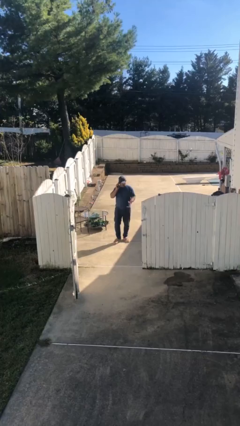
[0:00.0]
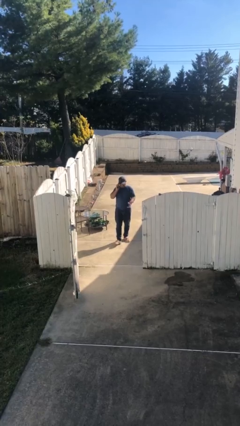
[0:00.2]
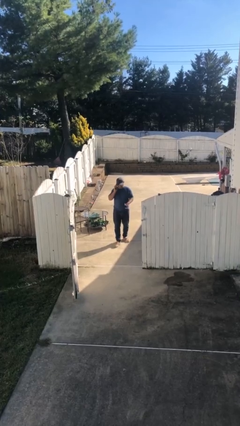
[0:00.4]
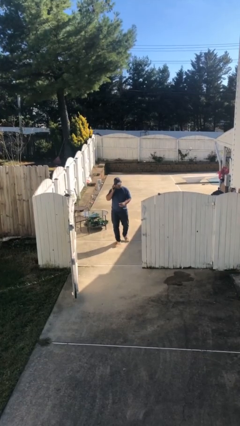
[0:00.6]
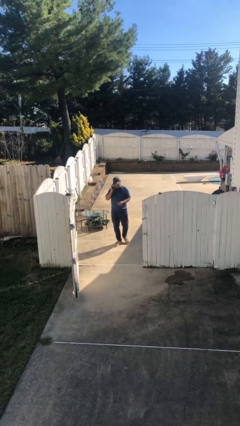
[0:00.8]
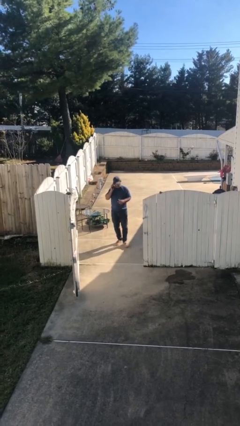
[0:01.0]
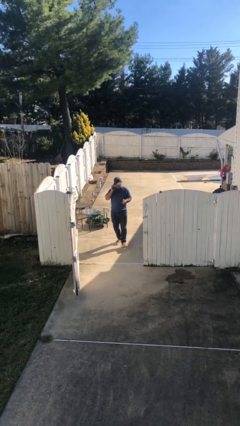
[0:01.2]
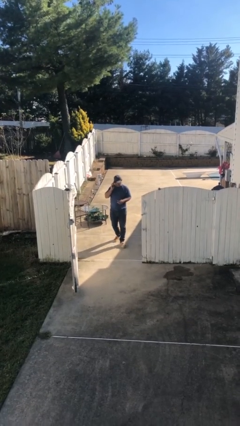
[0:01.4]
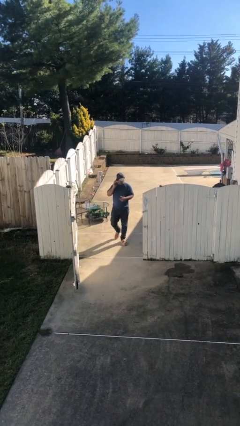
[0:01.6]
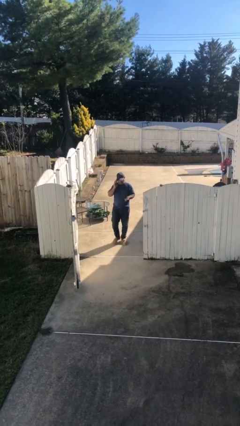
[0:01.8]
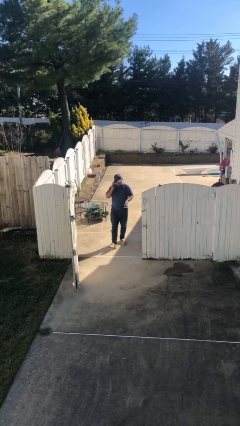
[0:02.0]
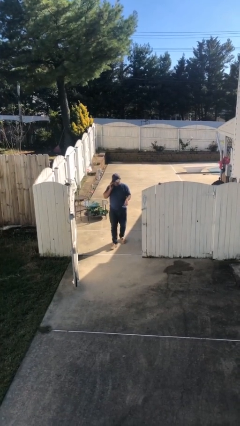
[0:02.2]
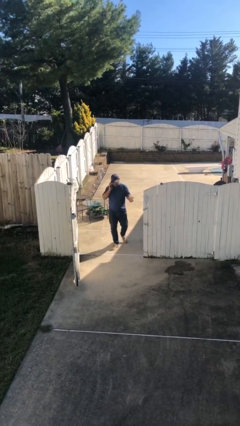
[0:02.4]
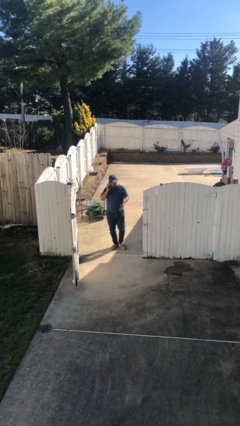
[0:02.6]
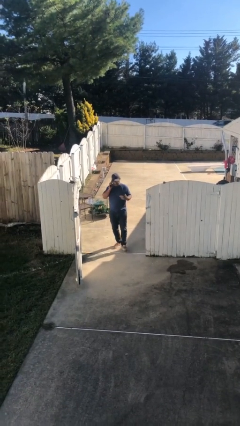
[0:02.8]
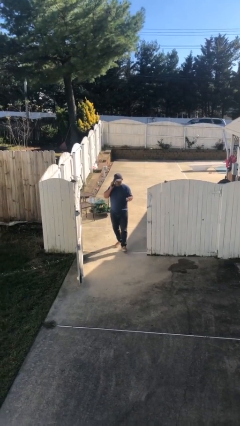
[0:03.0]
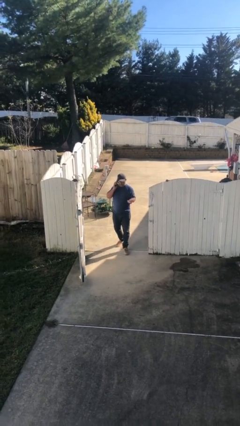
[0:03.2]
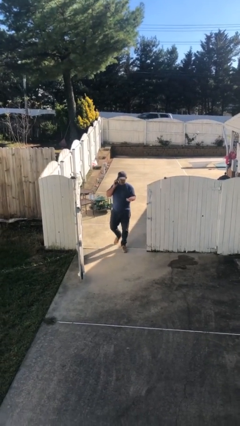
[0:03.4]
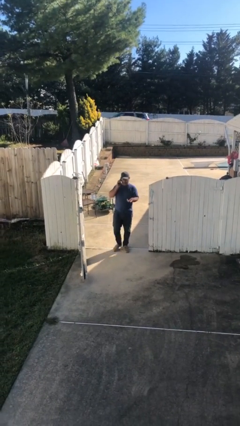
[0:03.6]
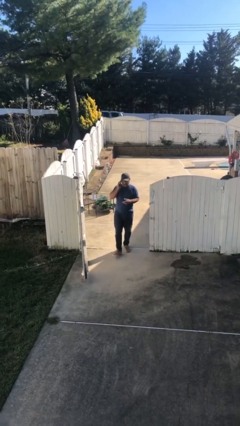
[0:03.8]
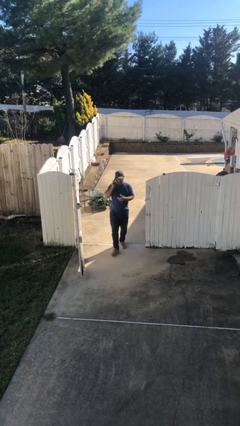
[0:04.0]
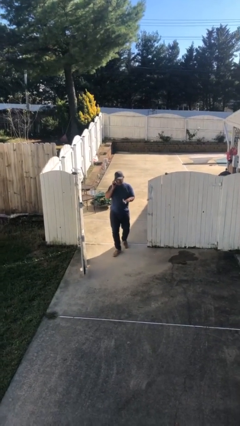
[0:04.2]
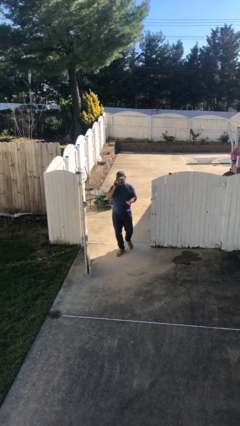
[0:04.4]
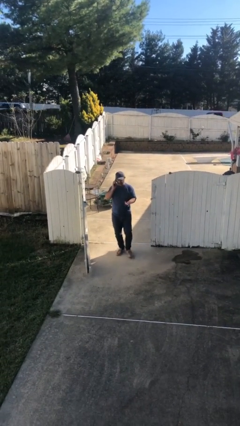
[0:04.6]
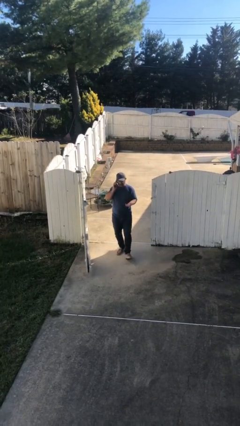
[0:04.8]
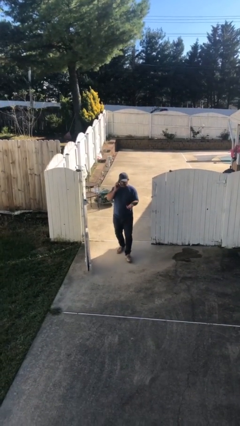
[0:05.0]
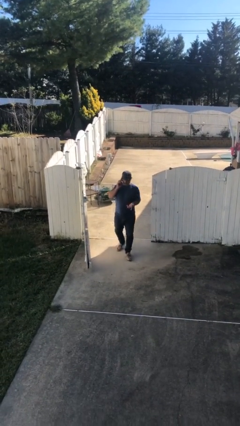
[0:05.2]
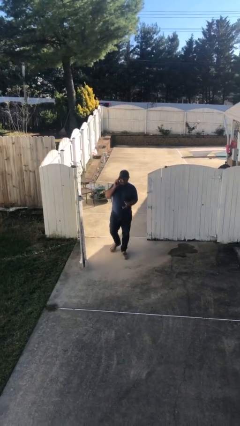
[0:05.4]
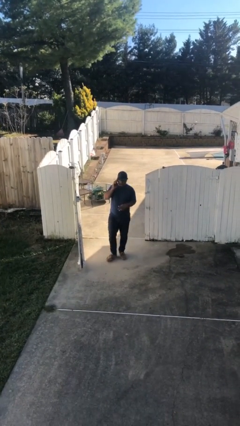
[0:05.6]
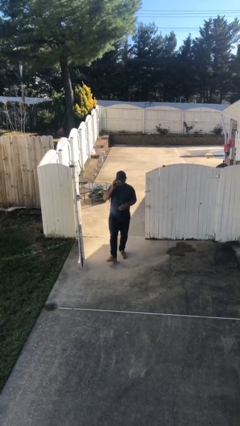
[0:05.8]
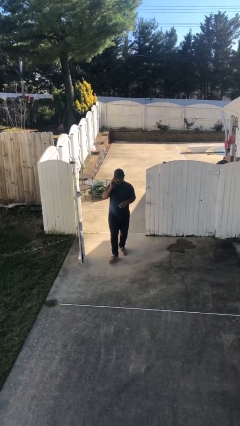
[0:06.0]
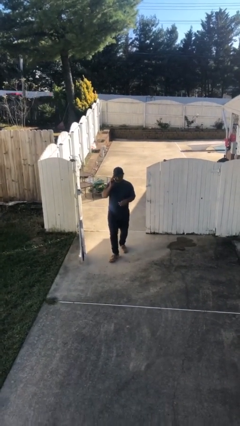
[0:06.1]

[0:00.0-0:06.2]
person enters scene through structure

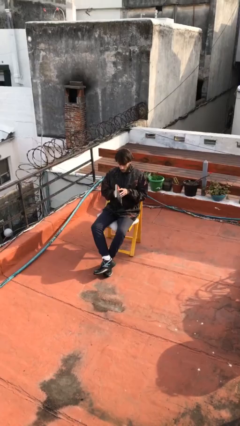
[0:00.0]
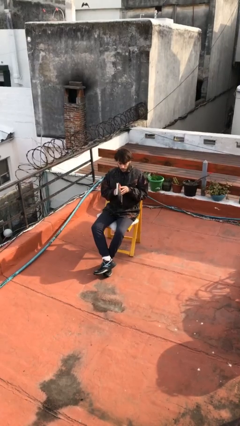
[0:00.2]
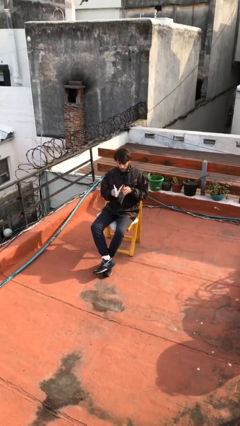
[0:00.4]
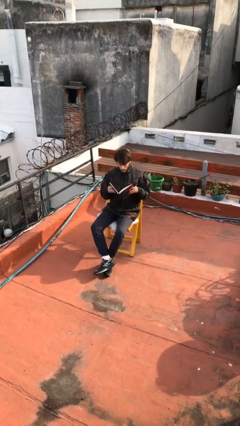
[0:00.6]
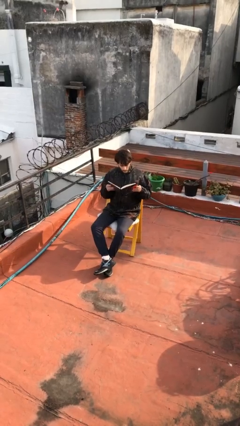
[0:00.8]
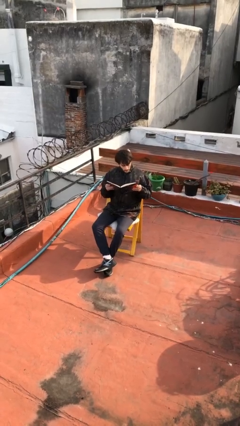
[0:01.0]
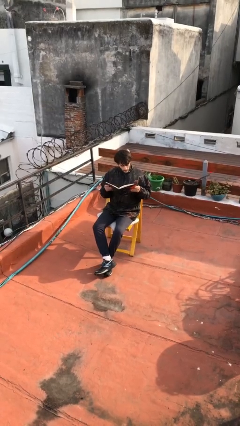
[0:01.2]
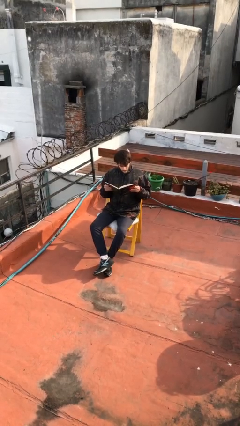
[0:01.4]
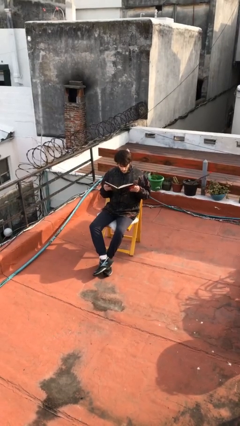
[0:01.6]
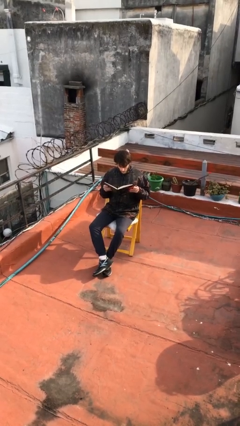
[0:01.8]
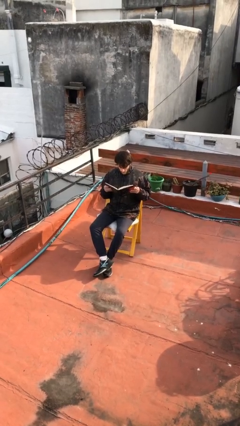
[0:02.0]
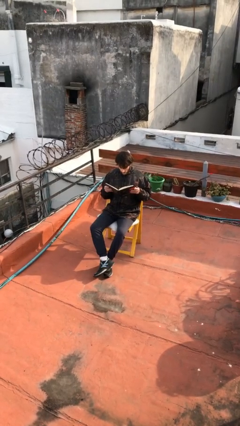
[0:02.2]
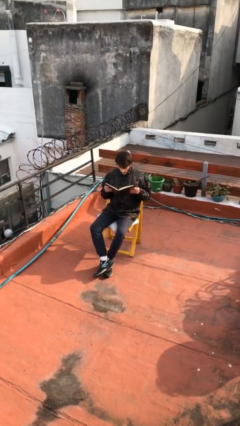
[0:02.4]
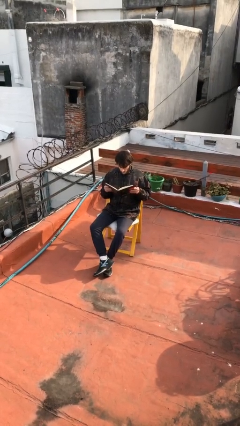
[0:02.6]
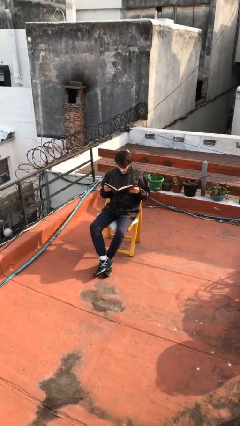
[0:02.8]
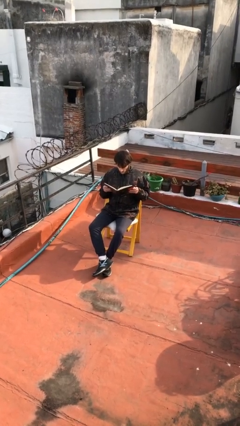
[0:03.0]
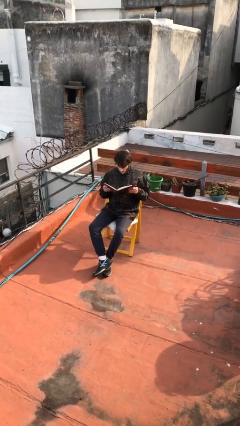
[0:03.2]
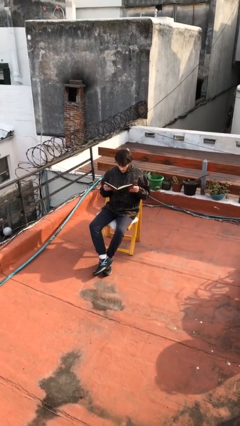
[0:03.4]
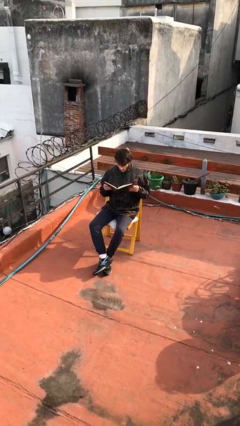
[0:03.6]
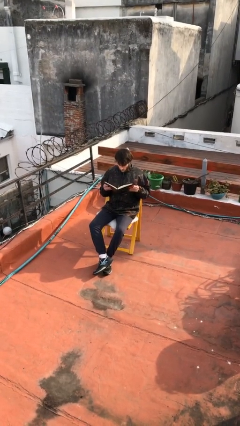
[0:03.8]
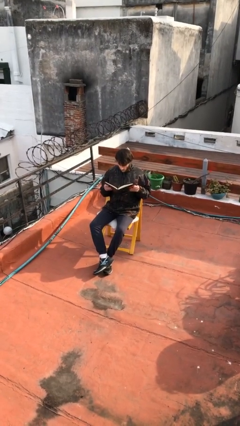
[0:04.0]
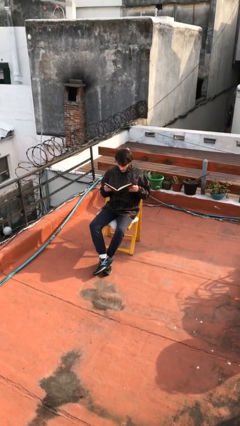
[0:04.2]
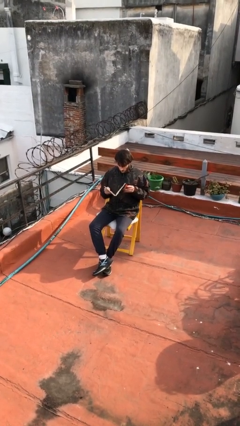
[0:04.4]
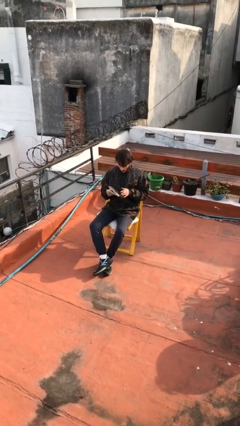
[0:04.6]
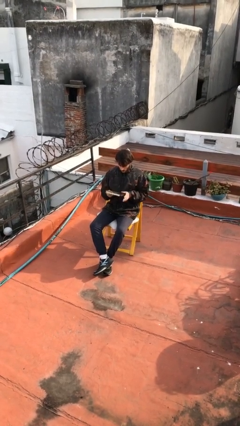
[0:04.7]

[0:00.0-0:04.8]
person reads book

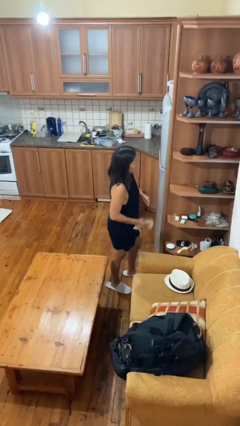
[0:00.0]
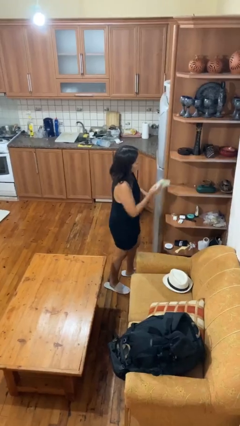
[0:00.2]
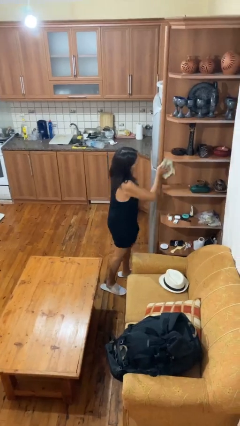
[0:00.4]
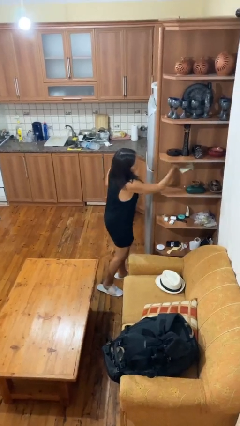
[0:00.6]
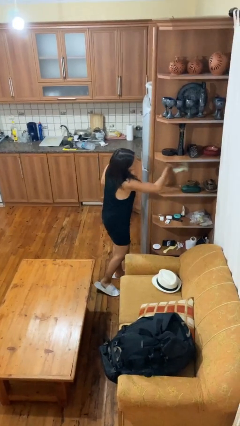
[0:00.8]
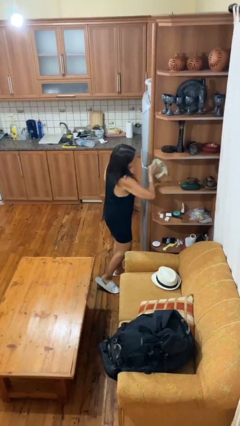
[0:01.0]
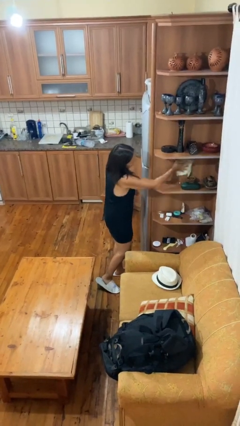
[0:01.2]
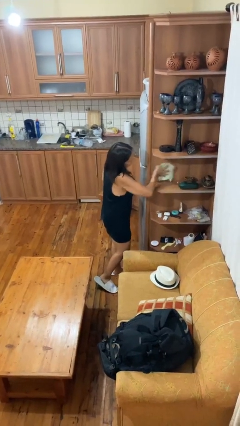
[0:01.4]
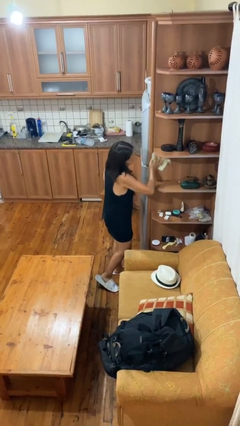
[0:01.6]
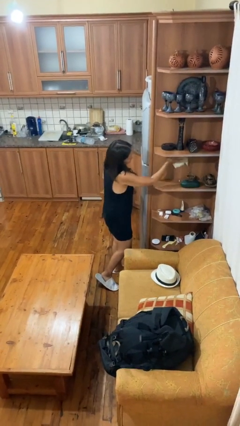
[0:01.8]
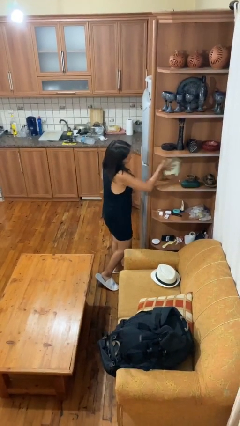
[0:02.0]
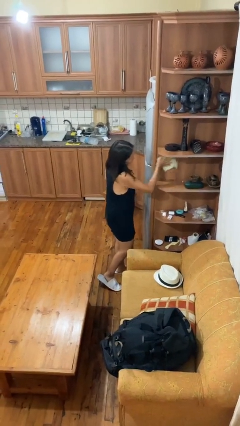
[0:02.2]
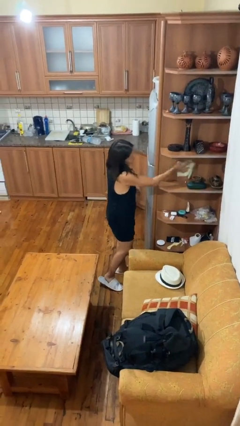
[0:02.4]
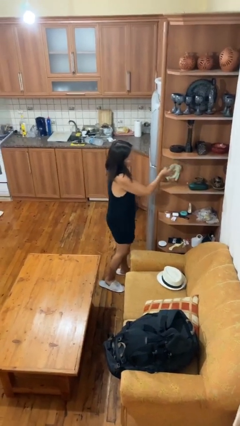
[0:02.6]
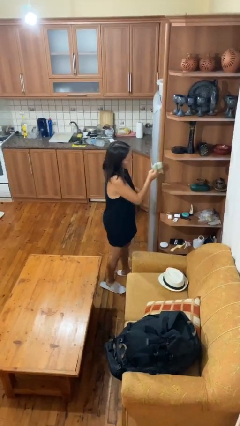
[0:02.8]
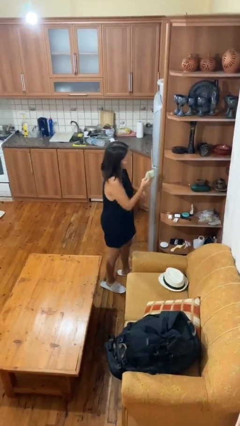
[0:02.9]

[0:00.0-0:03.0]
person dusts furniture

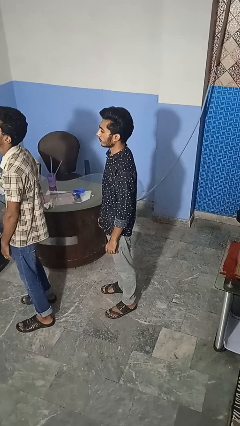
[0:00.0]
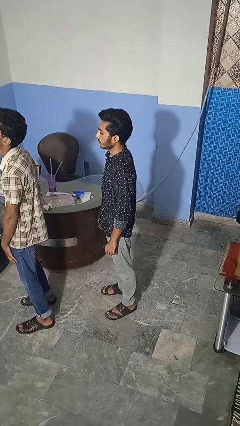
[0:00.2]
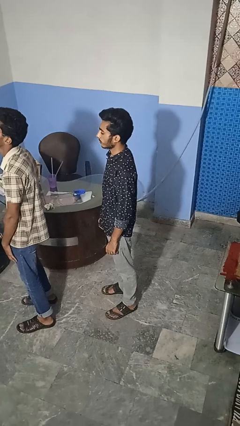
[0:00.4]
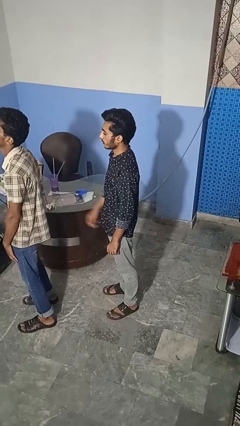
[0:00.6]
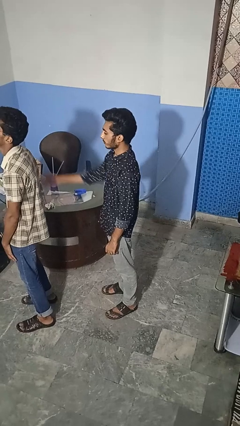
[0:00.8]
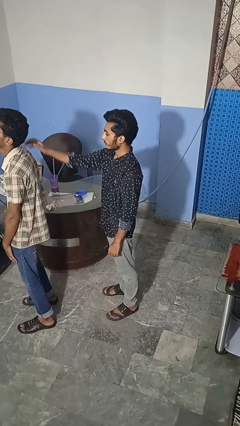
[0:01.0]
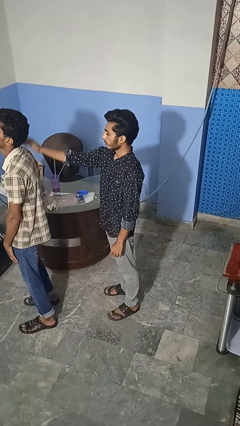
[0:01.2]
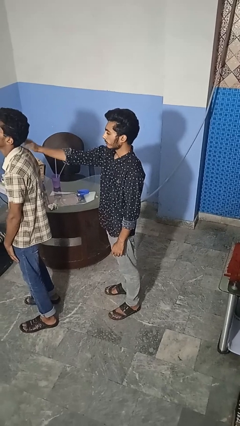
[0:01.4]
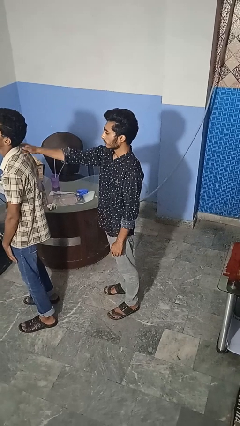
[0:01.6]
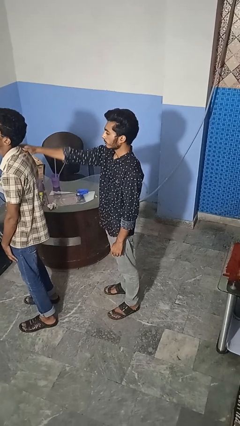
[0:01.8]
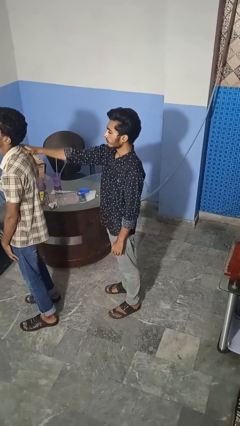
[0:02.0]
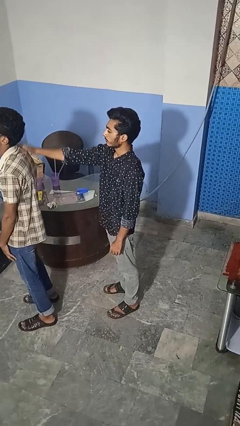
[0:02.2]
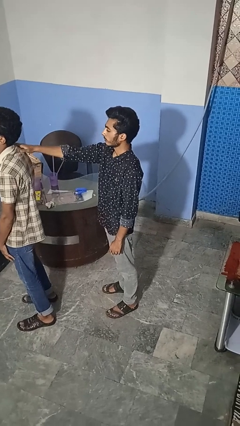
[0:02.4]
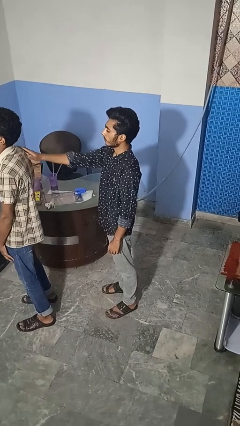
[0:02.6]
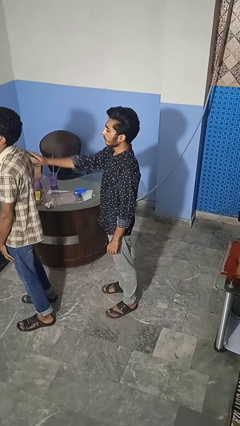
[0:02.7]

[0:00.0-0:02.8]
person touches back of person

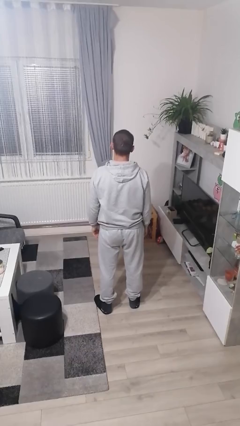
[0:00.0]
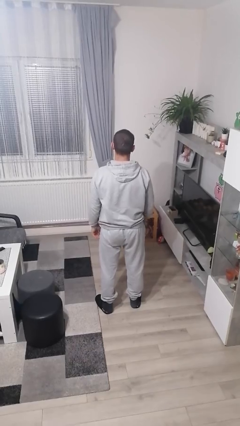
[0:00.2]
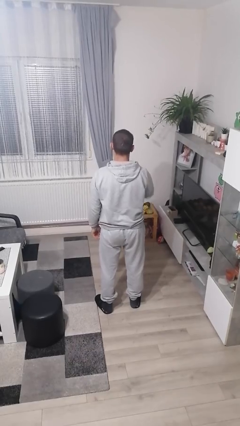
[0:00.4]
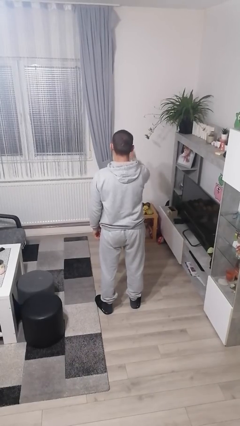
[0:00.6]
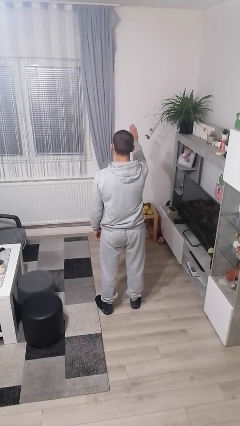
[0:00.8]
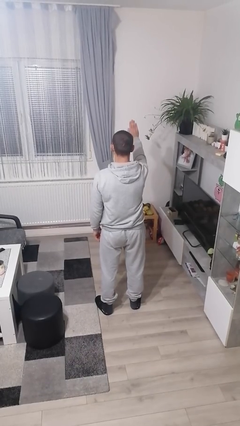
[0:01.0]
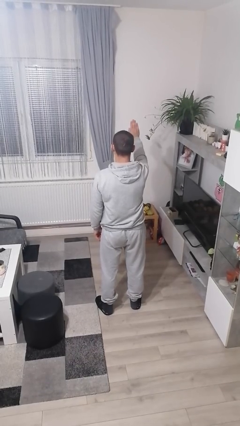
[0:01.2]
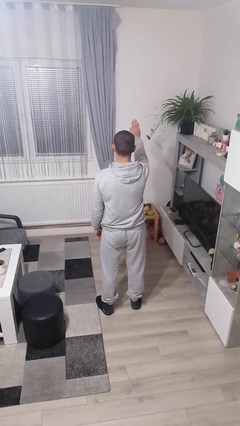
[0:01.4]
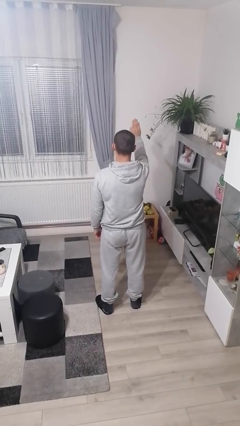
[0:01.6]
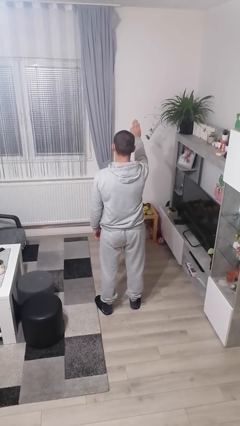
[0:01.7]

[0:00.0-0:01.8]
person gestures stop
